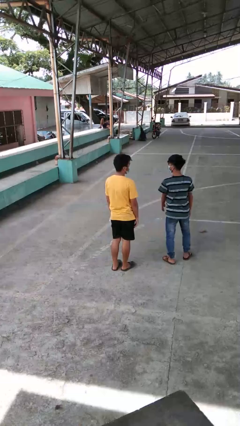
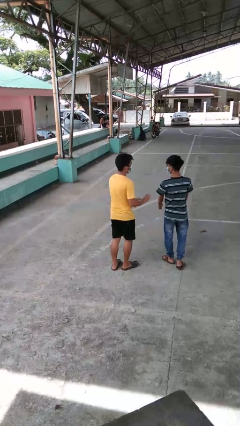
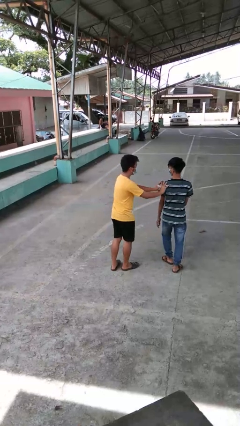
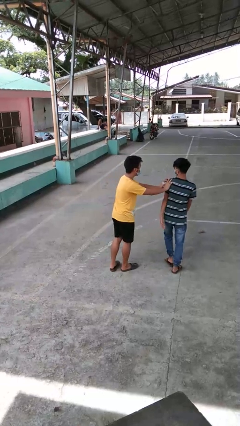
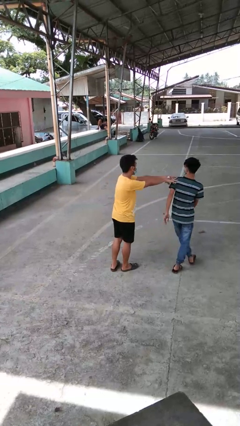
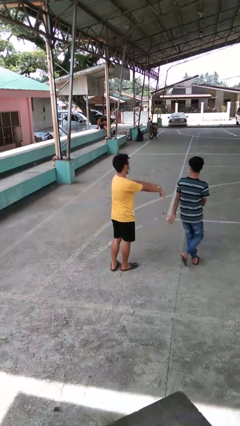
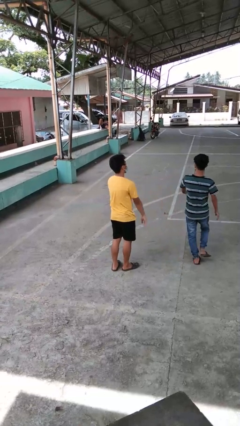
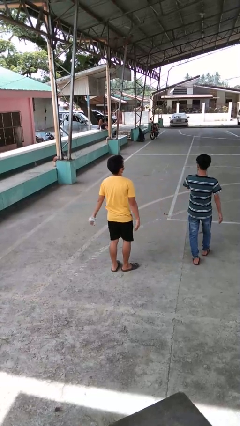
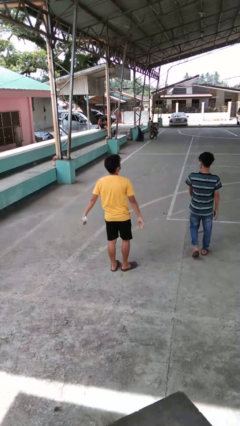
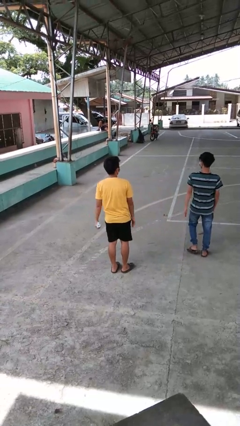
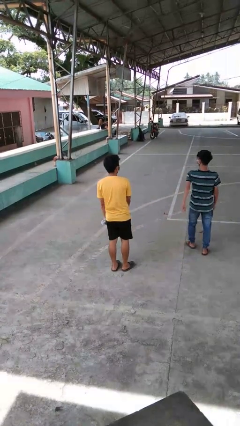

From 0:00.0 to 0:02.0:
person shoves person

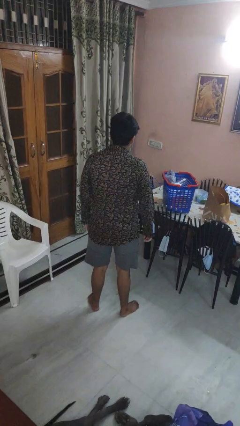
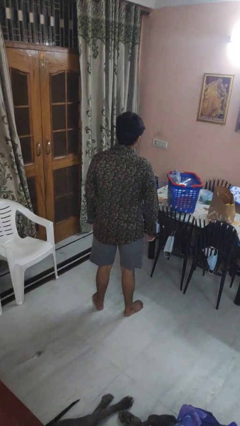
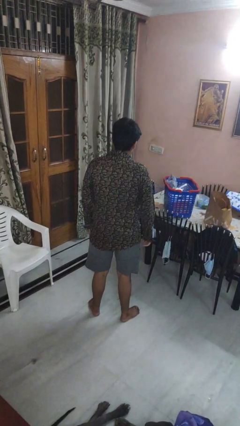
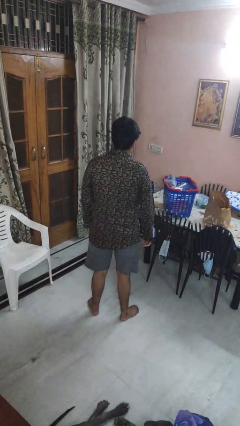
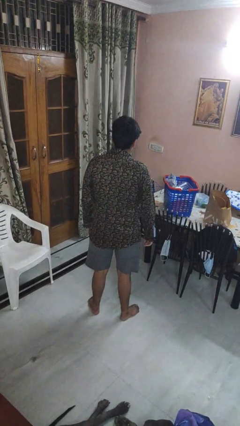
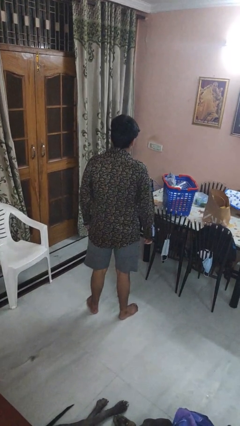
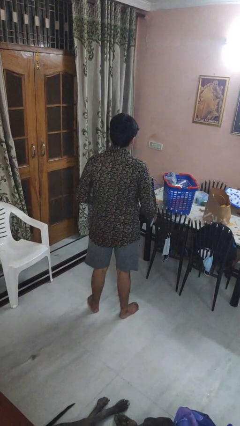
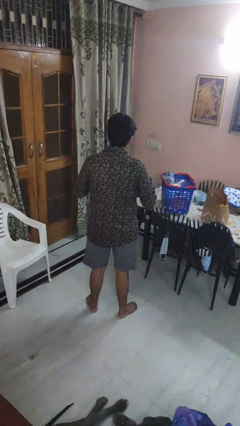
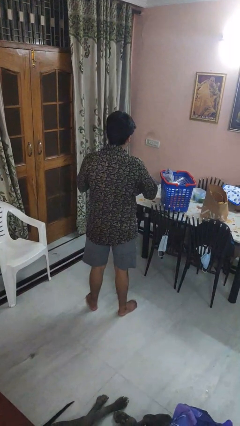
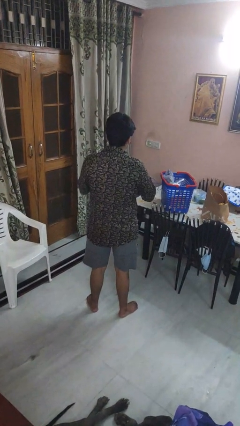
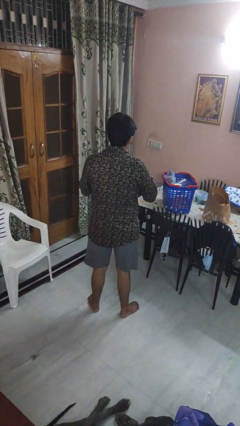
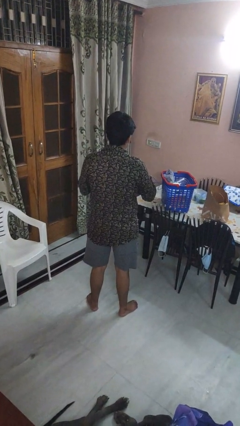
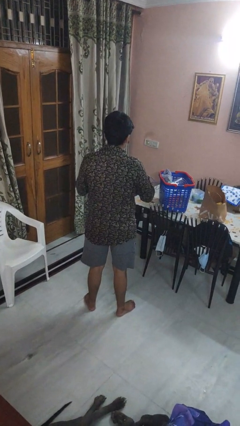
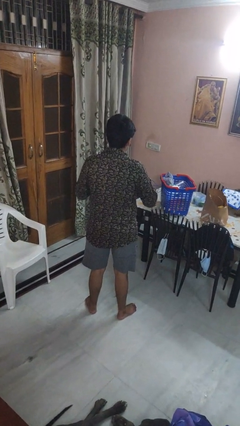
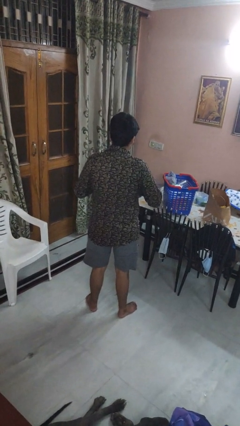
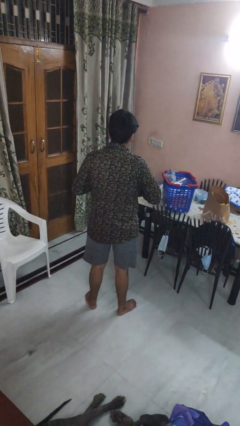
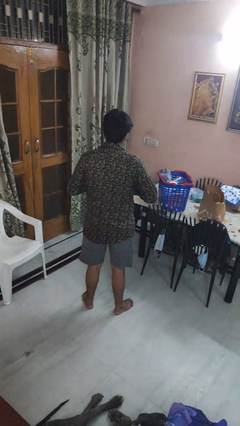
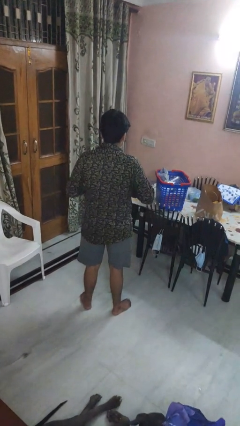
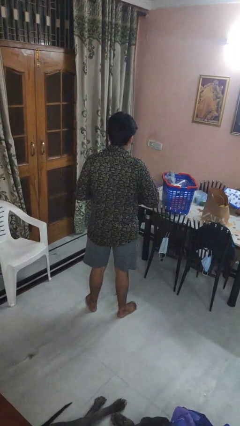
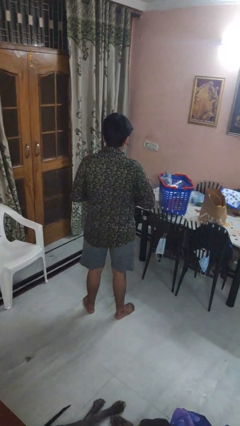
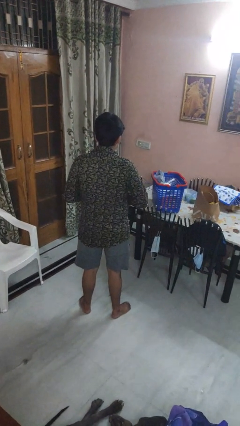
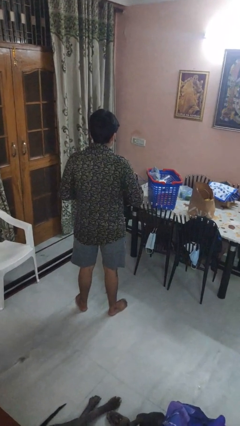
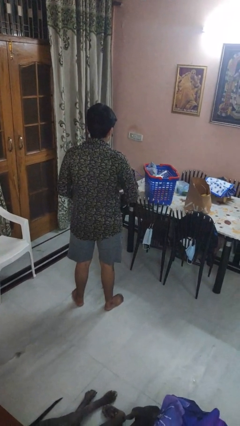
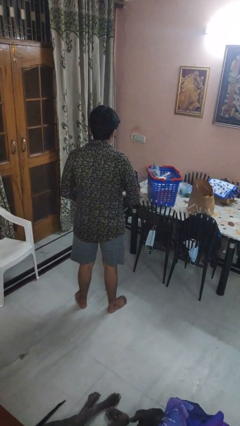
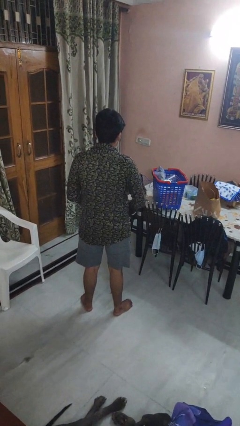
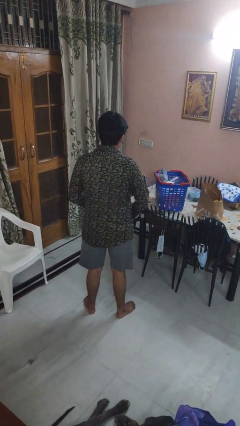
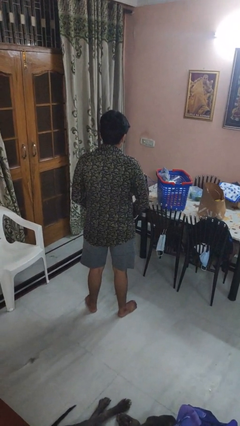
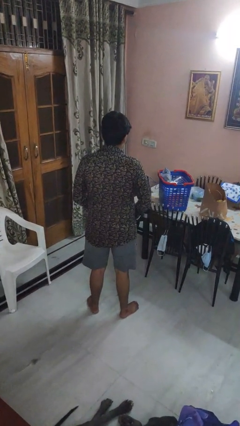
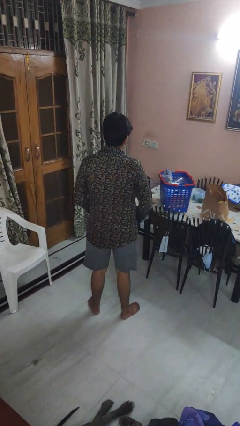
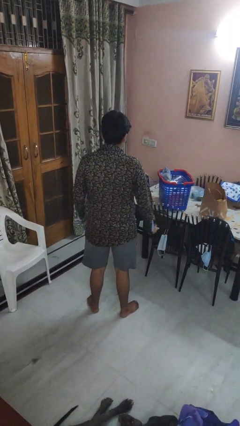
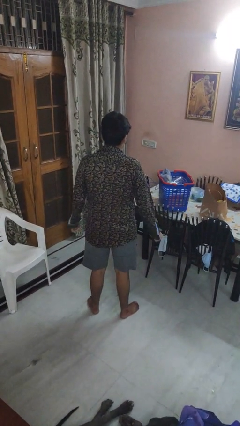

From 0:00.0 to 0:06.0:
person buttons shirt

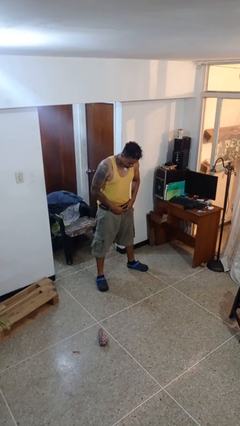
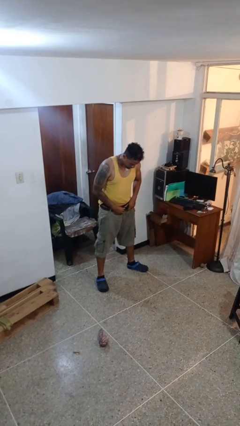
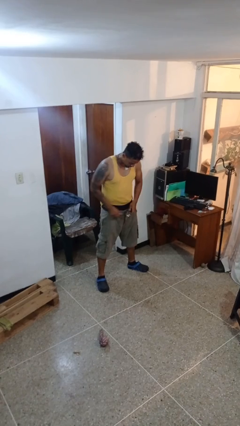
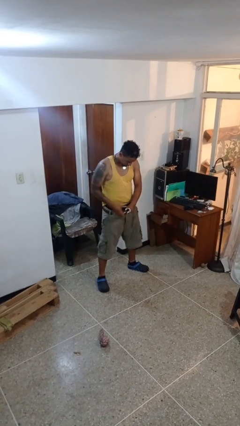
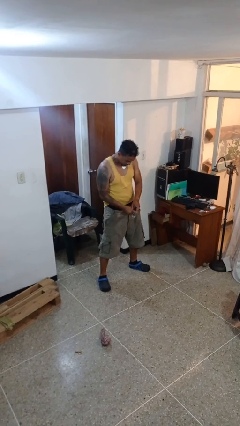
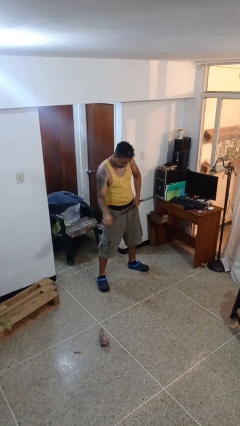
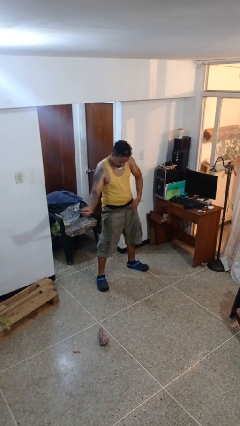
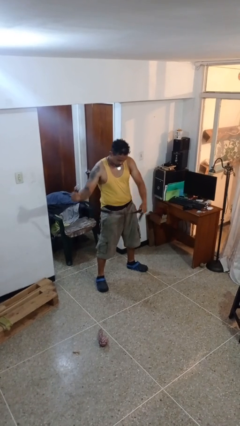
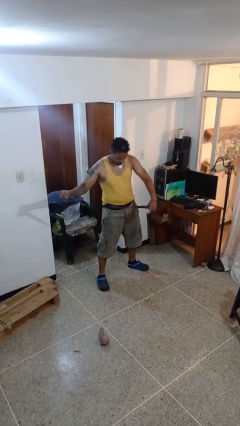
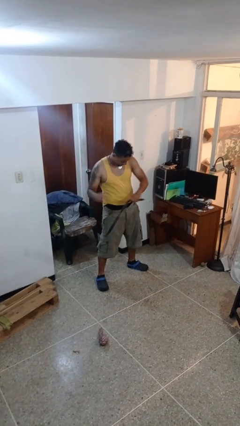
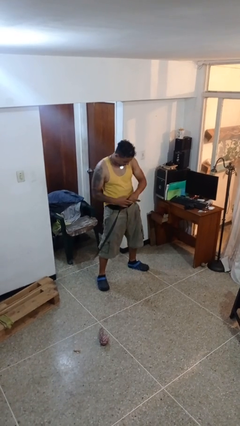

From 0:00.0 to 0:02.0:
person takes off belt

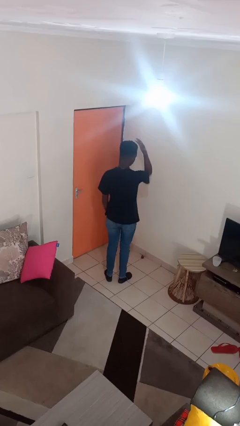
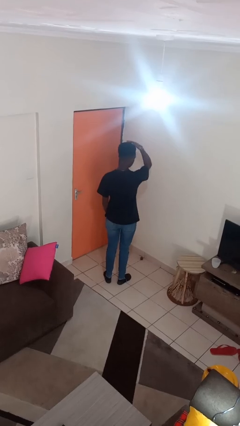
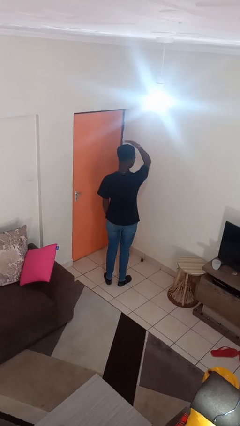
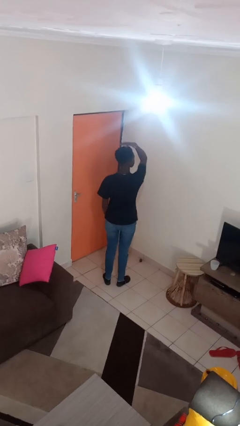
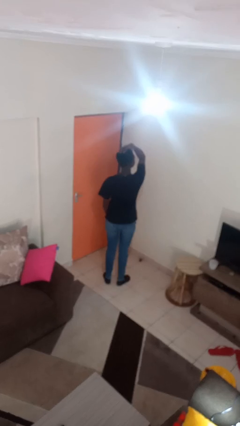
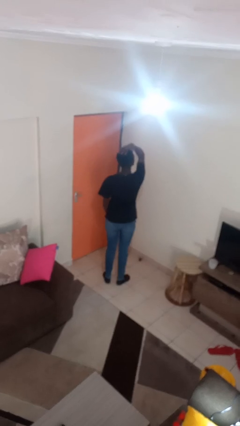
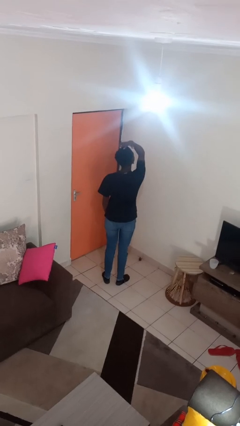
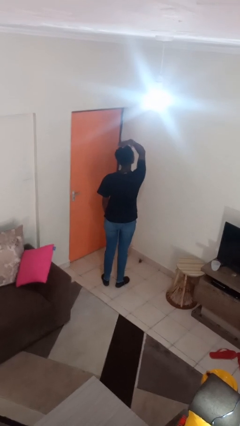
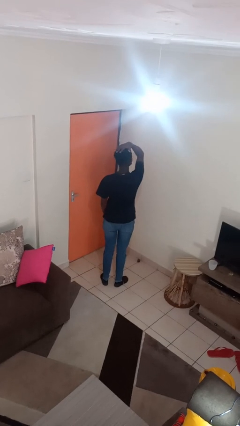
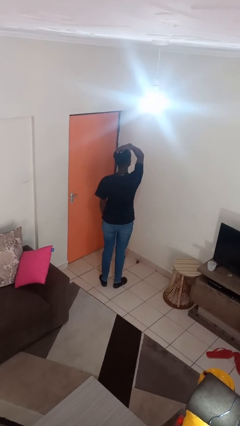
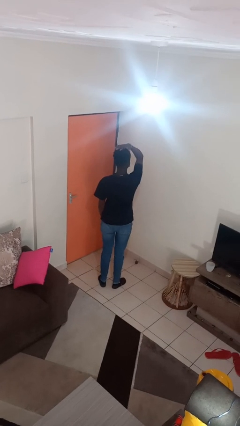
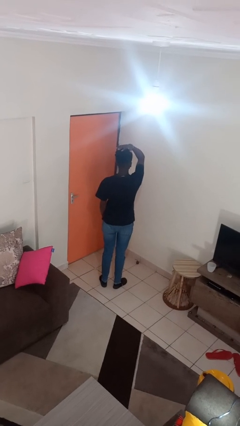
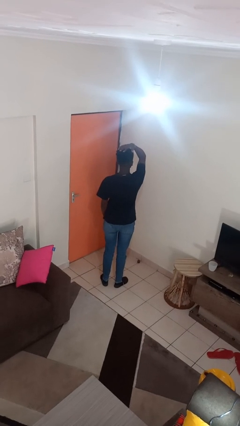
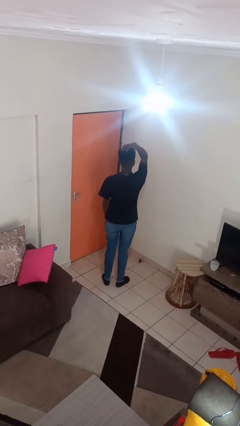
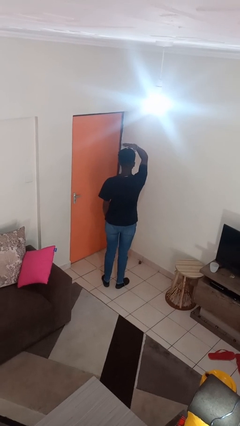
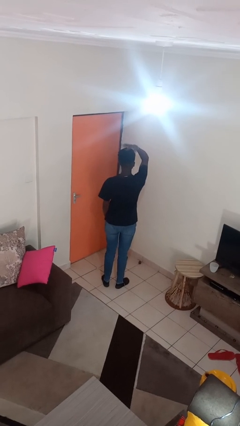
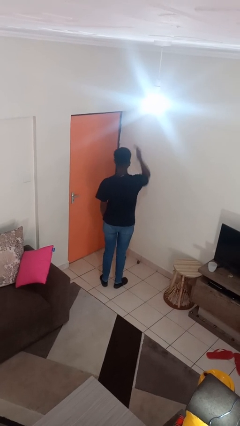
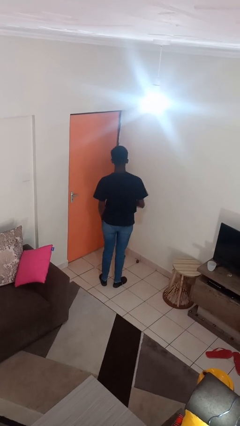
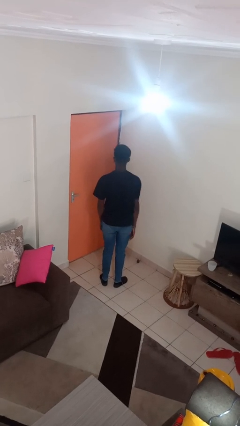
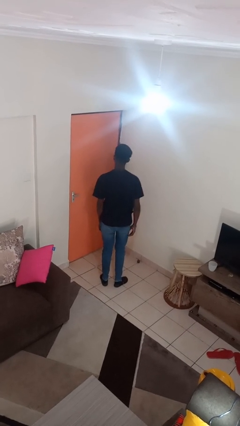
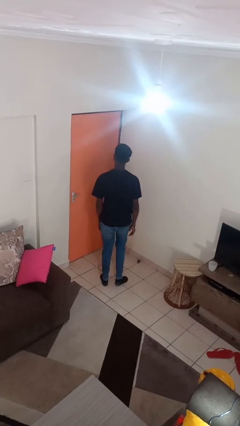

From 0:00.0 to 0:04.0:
person pats head

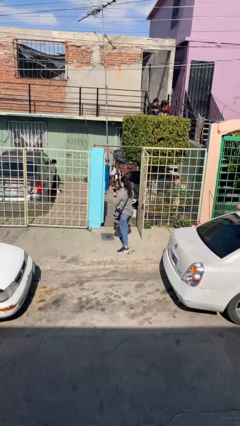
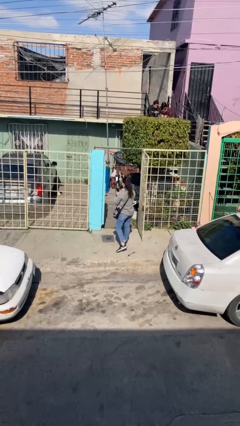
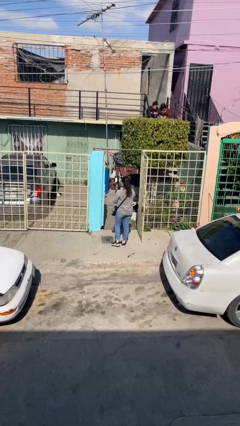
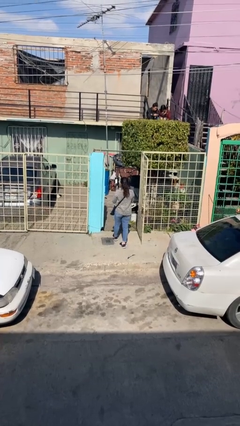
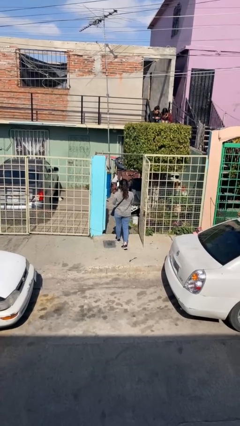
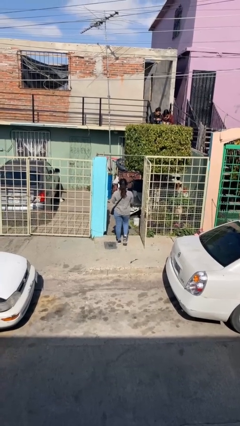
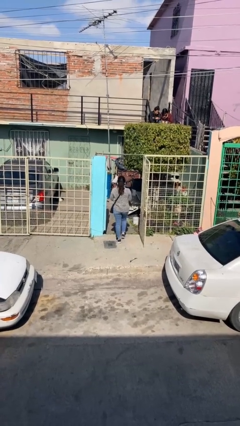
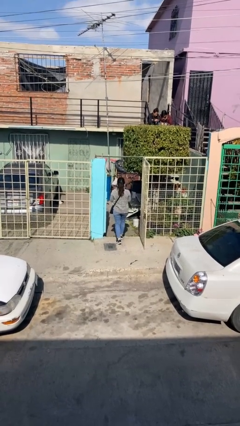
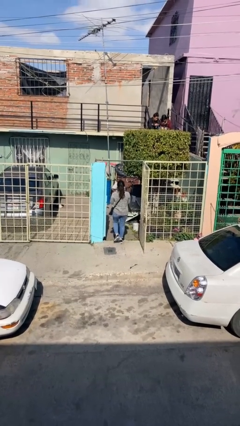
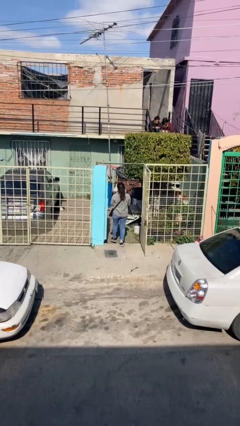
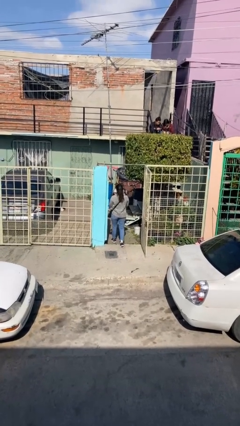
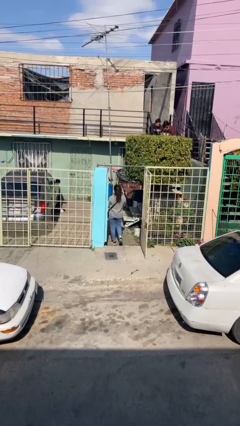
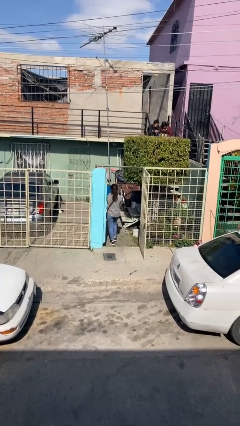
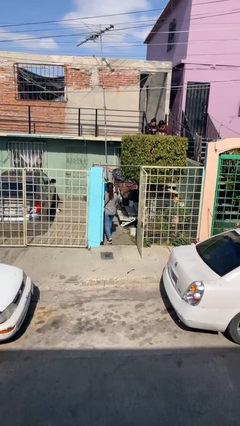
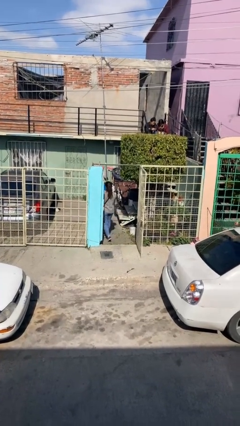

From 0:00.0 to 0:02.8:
person exits scene through structure

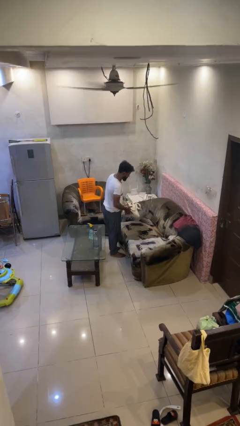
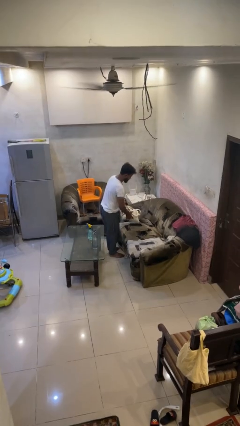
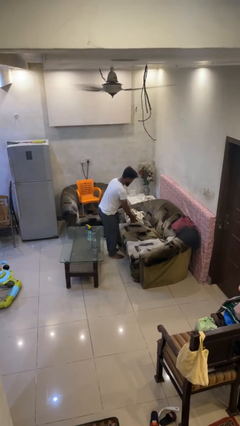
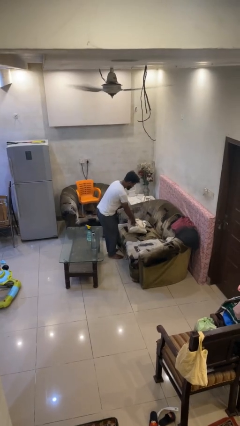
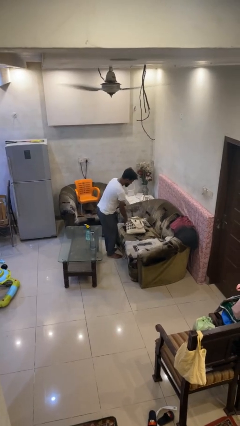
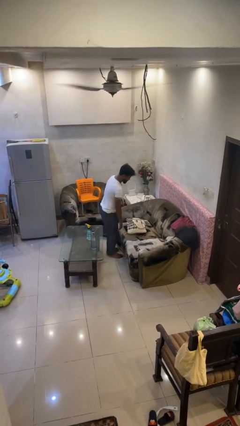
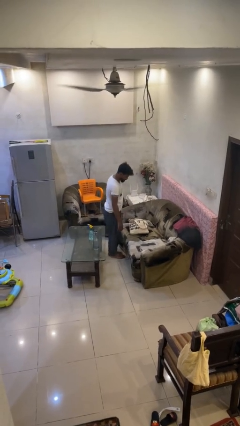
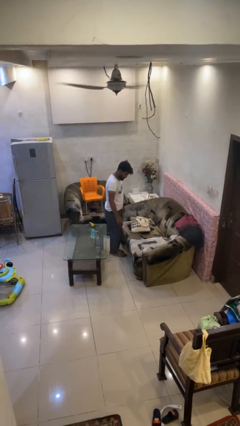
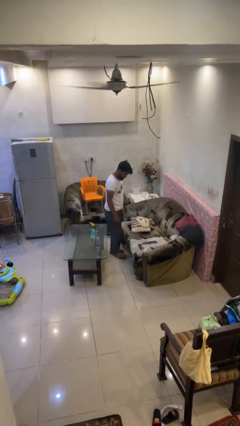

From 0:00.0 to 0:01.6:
person puts down object on couch
